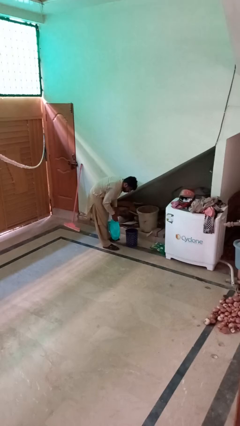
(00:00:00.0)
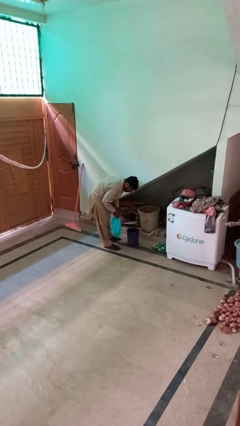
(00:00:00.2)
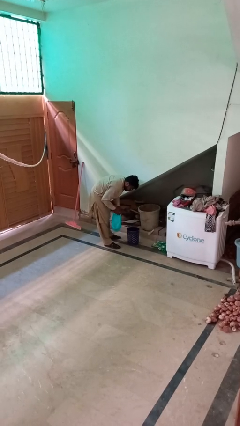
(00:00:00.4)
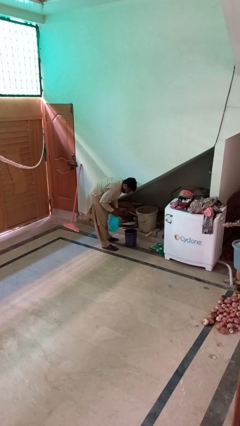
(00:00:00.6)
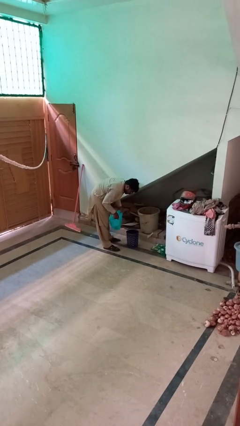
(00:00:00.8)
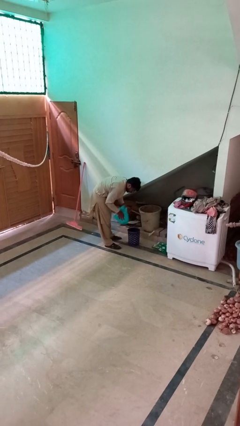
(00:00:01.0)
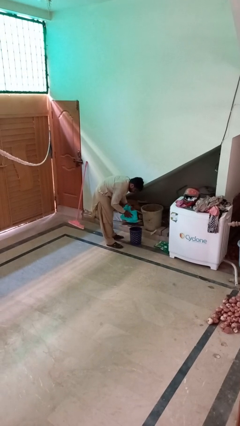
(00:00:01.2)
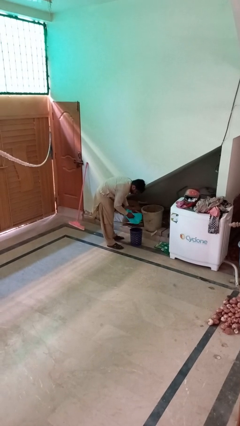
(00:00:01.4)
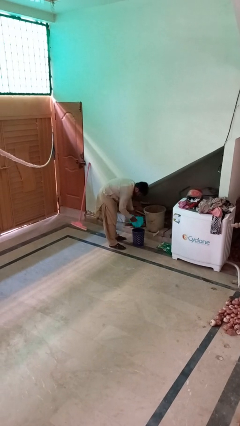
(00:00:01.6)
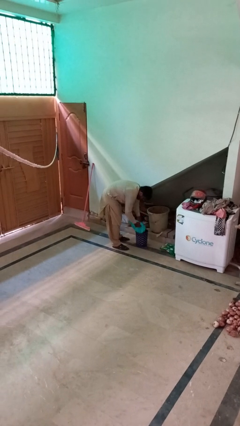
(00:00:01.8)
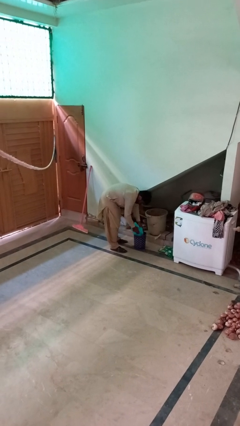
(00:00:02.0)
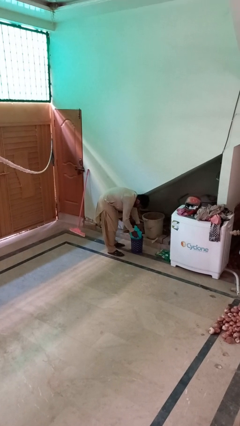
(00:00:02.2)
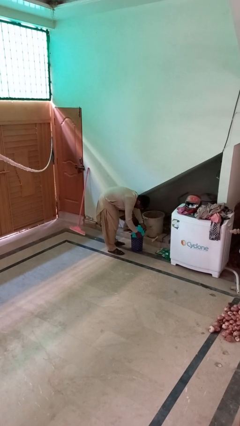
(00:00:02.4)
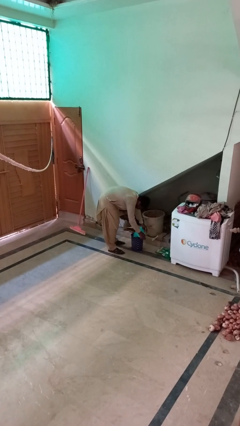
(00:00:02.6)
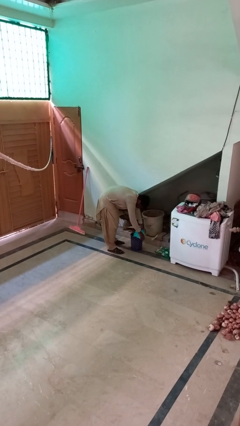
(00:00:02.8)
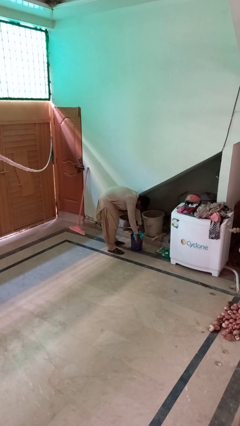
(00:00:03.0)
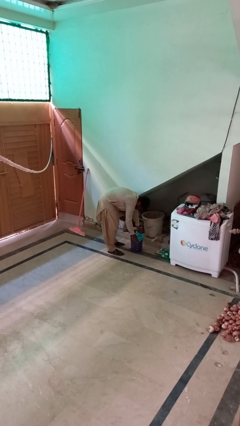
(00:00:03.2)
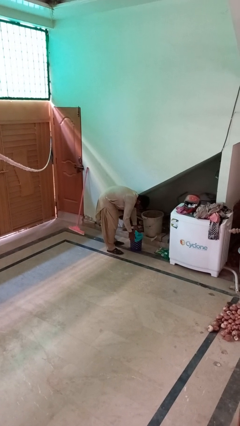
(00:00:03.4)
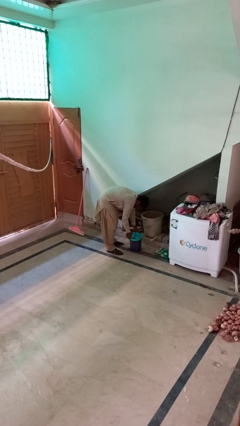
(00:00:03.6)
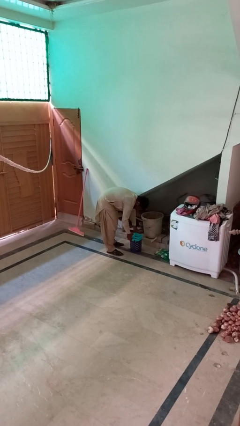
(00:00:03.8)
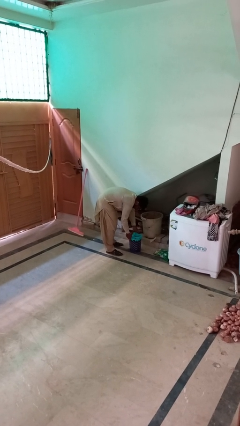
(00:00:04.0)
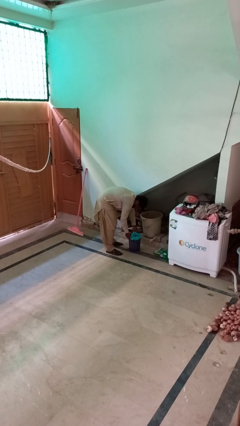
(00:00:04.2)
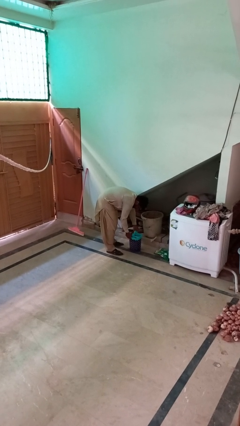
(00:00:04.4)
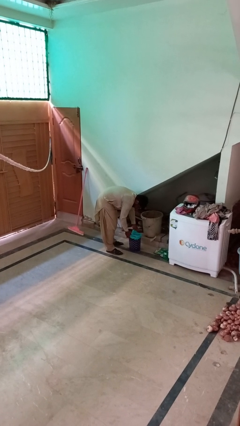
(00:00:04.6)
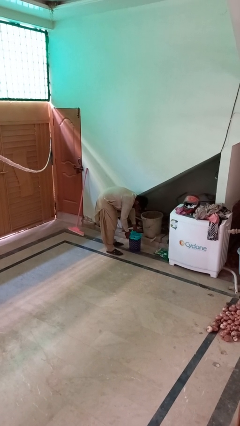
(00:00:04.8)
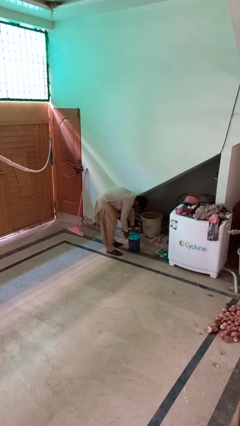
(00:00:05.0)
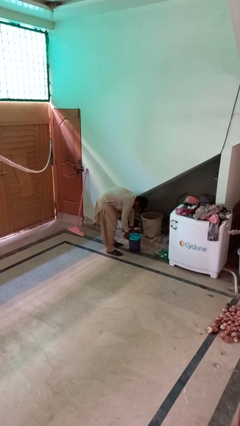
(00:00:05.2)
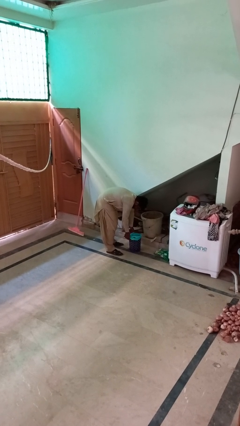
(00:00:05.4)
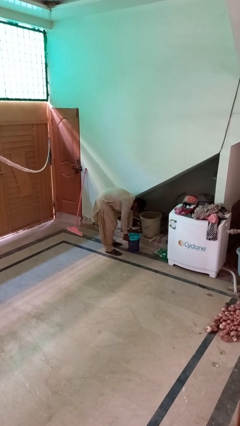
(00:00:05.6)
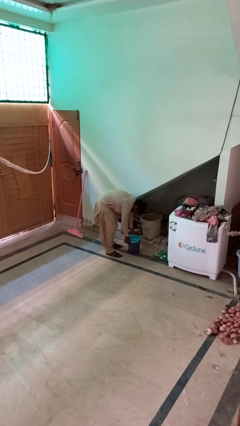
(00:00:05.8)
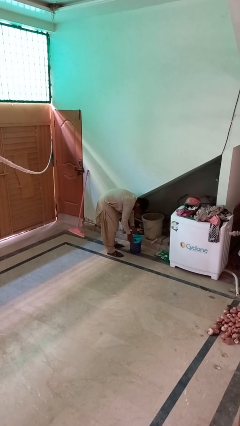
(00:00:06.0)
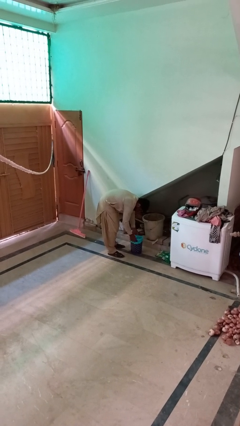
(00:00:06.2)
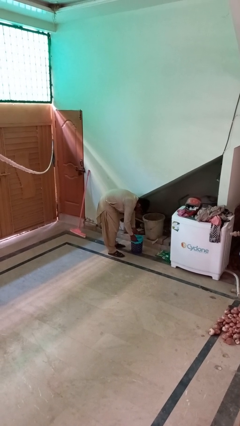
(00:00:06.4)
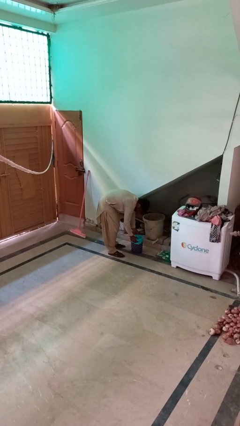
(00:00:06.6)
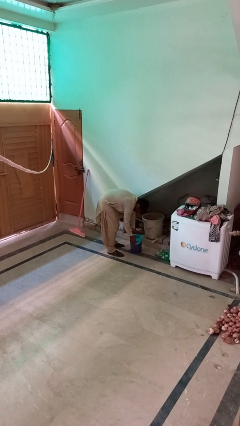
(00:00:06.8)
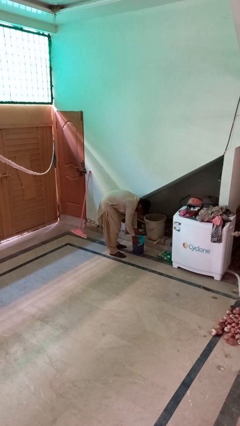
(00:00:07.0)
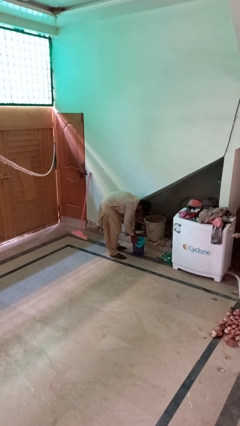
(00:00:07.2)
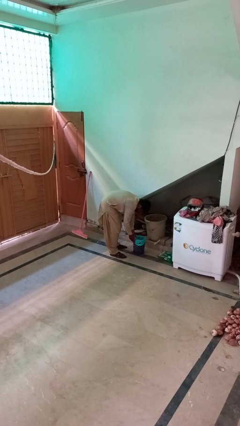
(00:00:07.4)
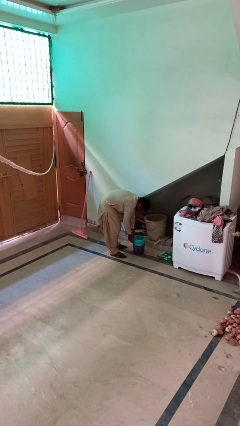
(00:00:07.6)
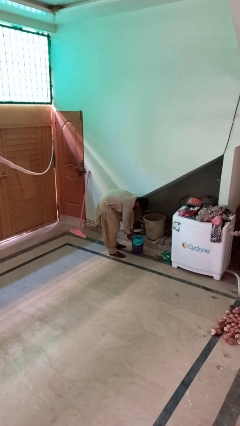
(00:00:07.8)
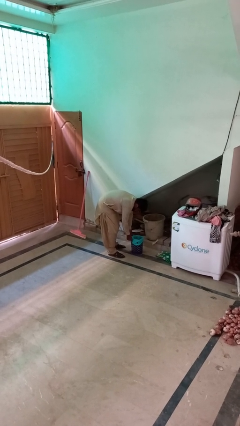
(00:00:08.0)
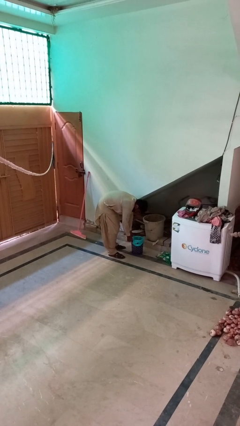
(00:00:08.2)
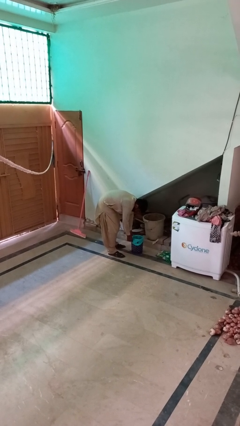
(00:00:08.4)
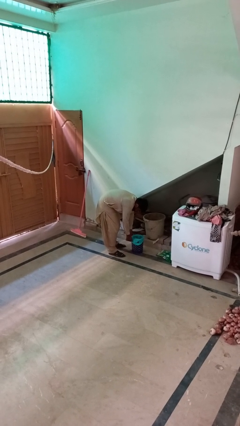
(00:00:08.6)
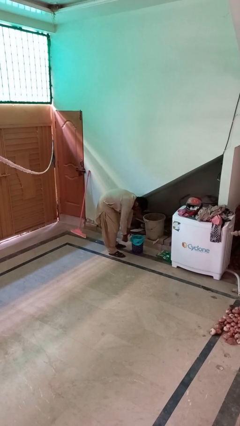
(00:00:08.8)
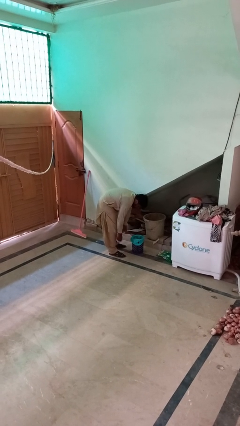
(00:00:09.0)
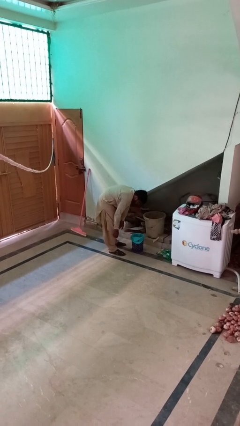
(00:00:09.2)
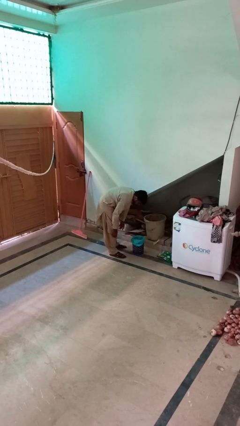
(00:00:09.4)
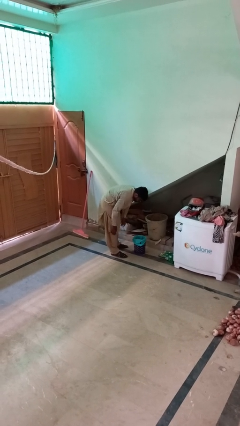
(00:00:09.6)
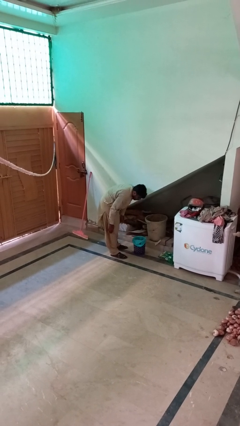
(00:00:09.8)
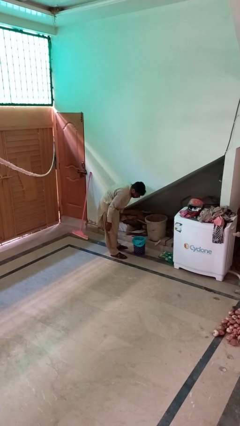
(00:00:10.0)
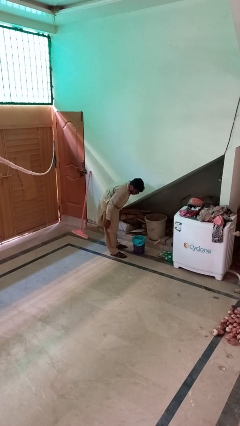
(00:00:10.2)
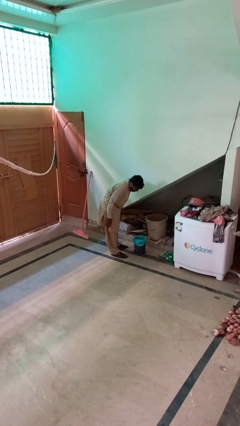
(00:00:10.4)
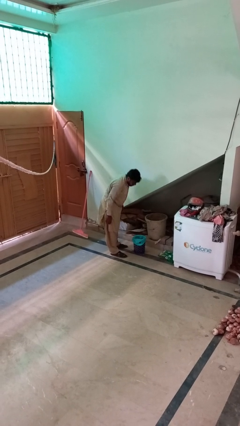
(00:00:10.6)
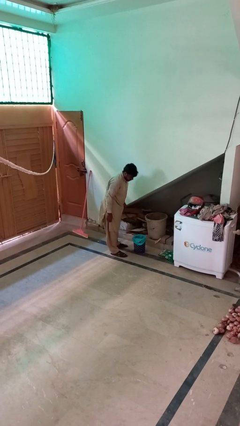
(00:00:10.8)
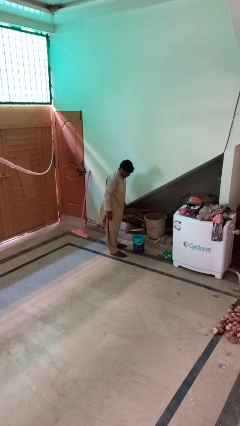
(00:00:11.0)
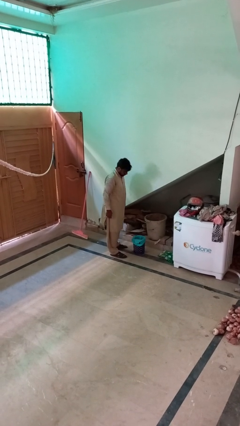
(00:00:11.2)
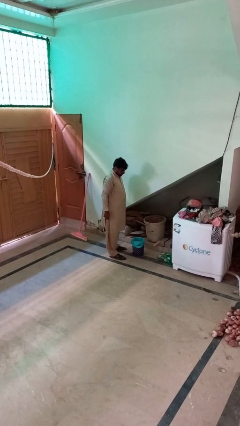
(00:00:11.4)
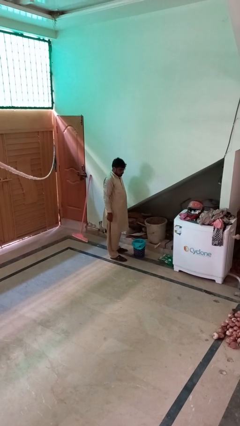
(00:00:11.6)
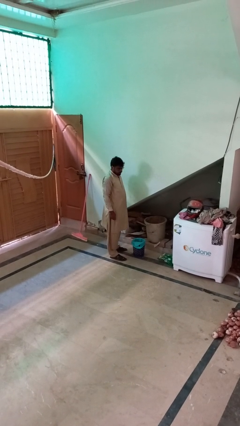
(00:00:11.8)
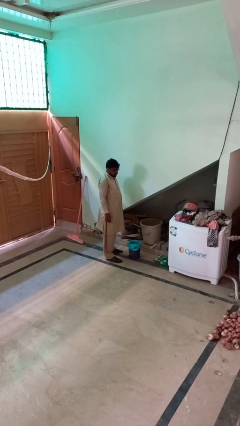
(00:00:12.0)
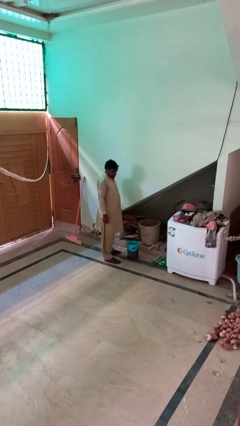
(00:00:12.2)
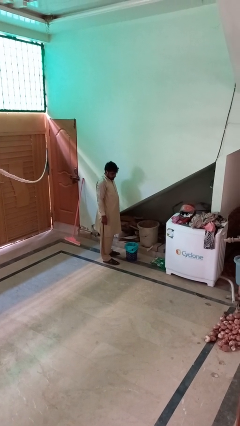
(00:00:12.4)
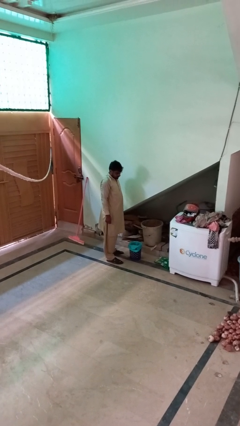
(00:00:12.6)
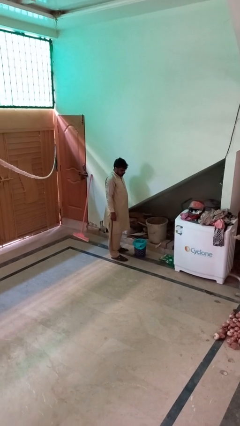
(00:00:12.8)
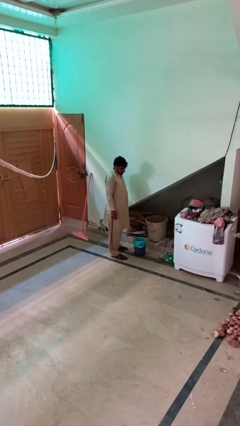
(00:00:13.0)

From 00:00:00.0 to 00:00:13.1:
person inserts trashbag into trashcan

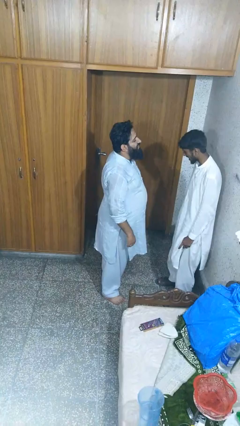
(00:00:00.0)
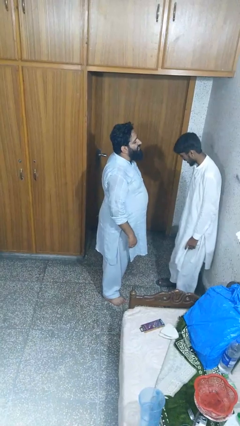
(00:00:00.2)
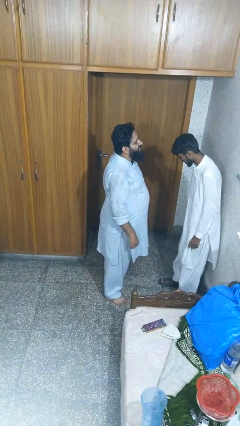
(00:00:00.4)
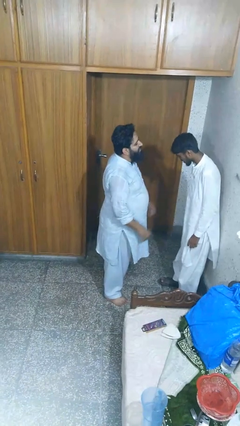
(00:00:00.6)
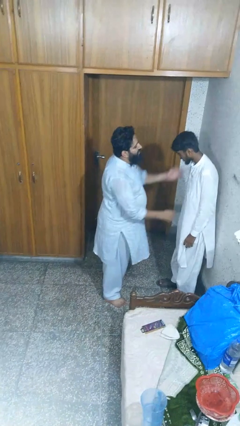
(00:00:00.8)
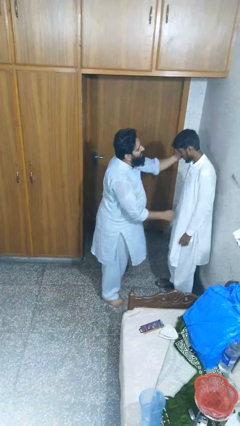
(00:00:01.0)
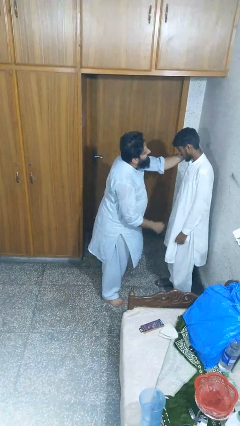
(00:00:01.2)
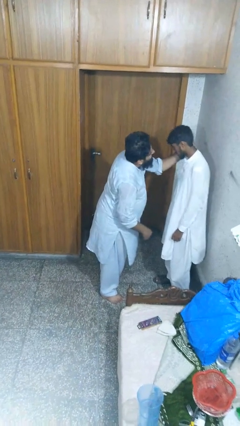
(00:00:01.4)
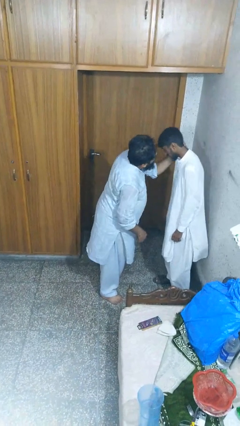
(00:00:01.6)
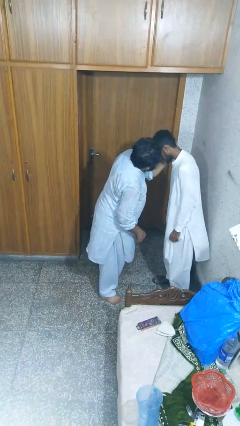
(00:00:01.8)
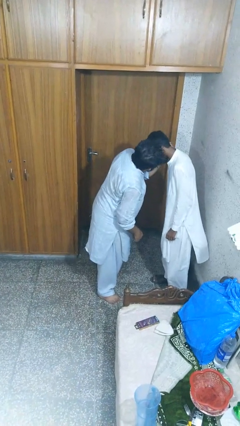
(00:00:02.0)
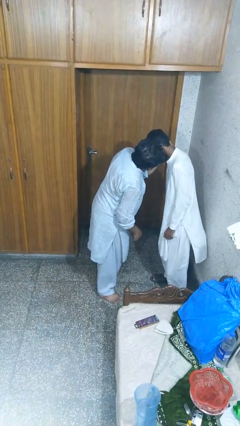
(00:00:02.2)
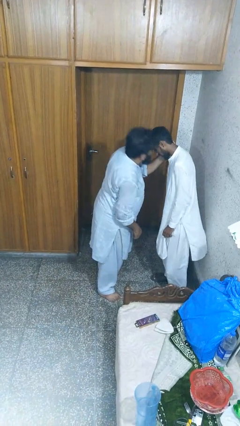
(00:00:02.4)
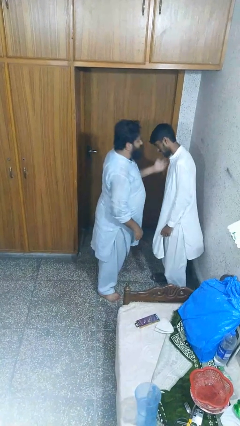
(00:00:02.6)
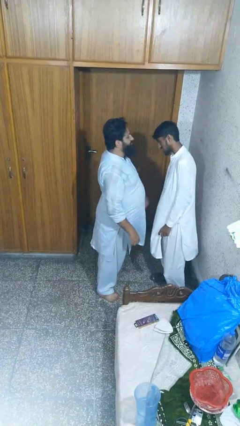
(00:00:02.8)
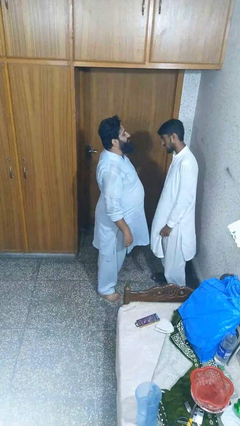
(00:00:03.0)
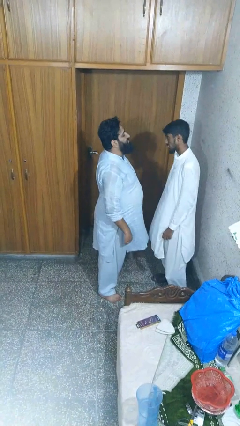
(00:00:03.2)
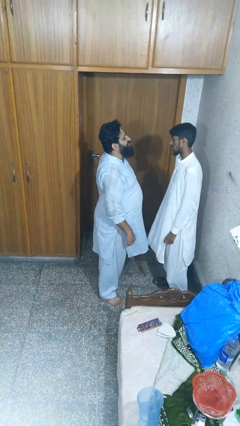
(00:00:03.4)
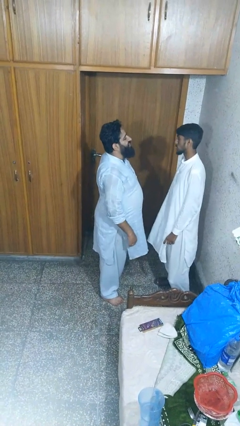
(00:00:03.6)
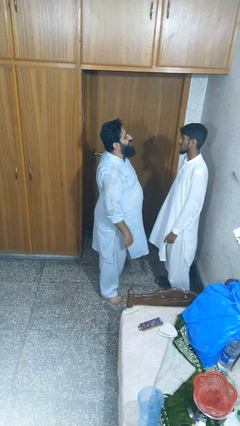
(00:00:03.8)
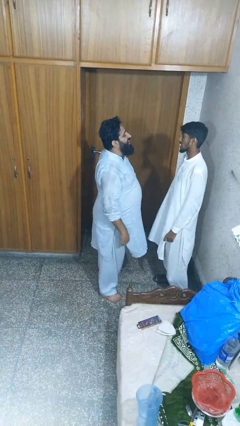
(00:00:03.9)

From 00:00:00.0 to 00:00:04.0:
person kisses cheek of person

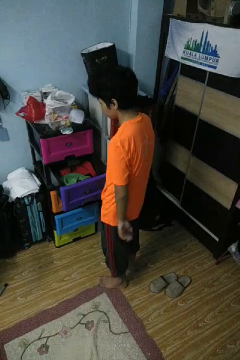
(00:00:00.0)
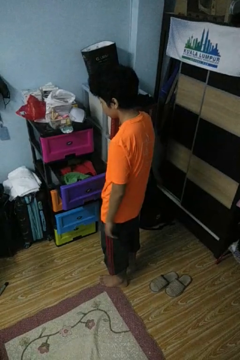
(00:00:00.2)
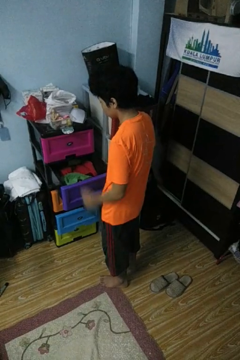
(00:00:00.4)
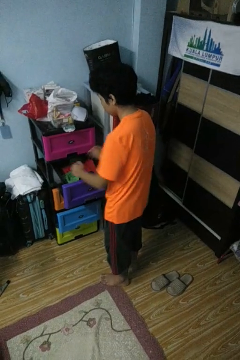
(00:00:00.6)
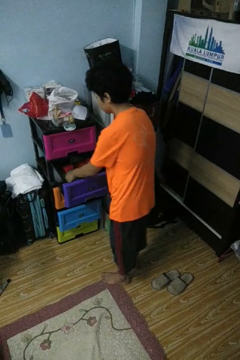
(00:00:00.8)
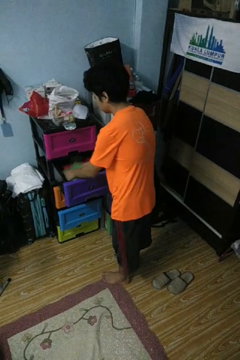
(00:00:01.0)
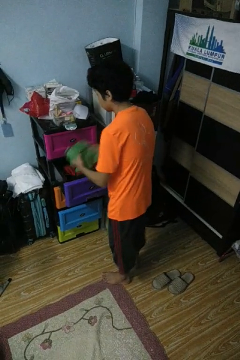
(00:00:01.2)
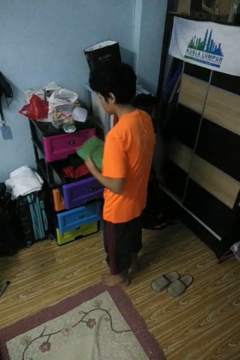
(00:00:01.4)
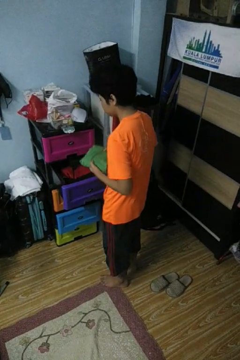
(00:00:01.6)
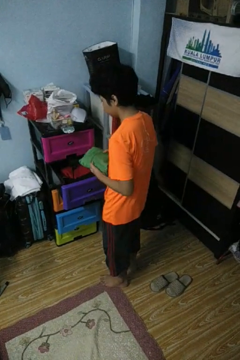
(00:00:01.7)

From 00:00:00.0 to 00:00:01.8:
person takes clothes from dresser
